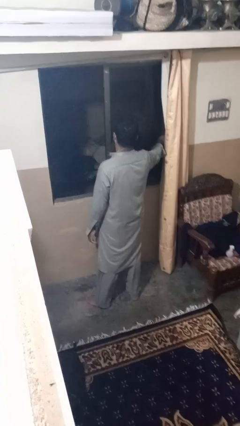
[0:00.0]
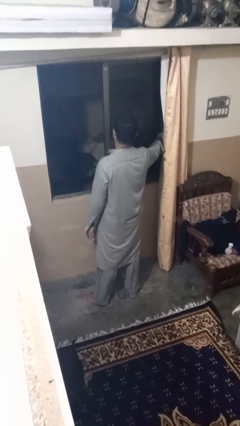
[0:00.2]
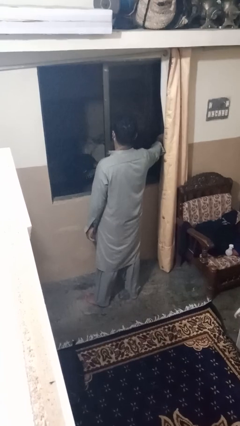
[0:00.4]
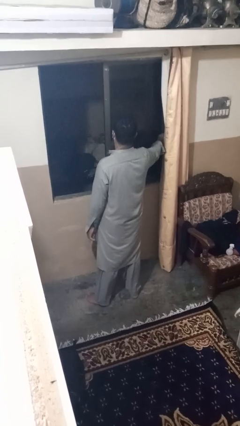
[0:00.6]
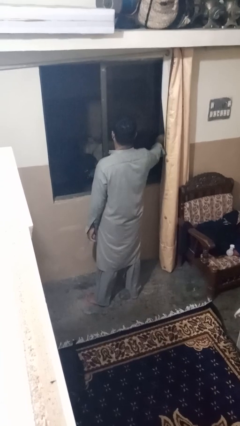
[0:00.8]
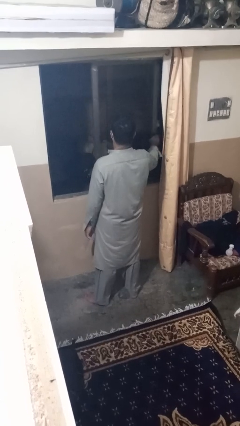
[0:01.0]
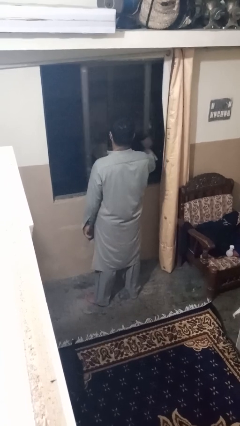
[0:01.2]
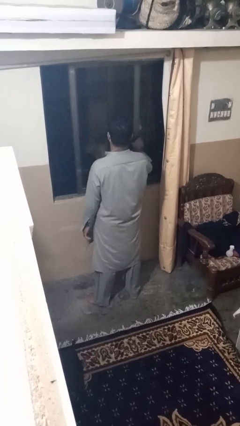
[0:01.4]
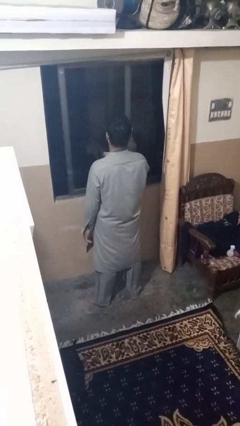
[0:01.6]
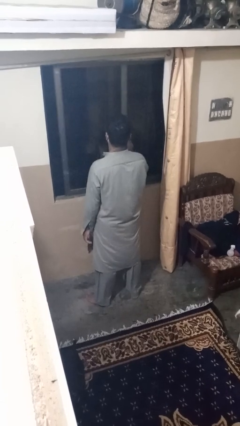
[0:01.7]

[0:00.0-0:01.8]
person closes home window

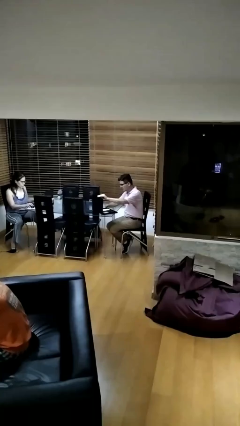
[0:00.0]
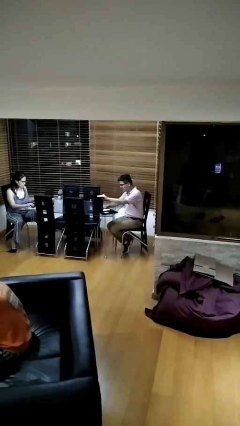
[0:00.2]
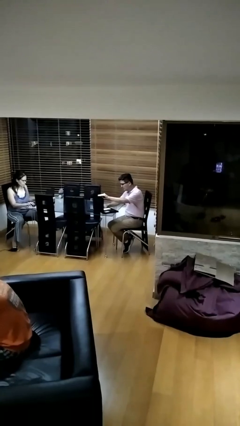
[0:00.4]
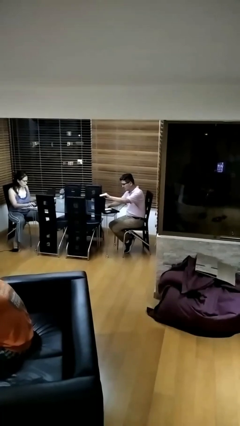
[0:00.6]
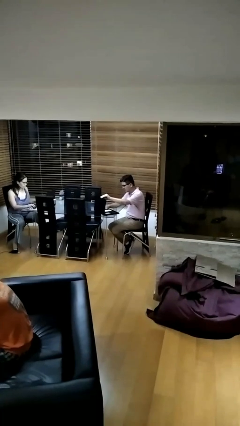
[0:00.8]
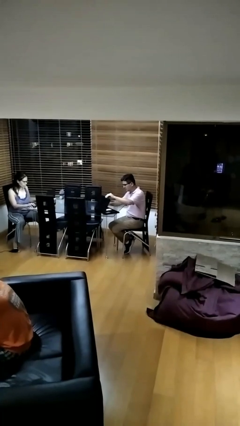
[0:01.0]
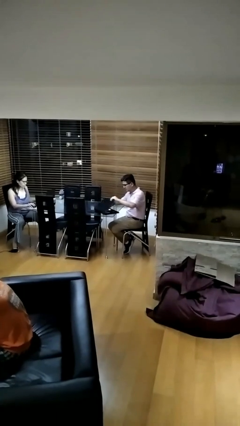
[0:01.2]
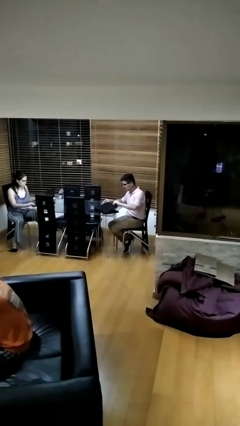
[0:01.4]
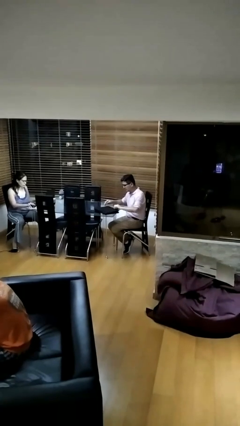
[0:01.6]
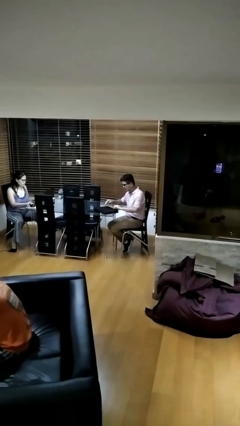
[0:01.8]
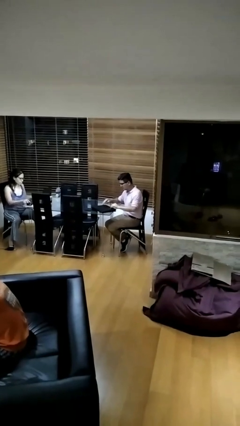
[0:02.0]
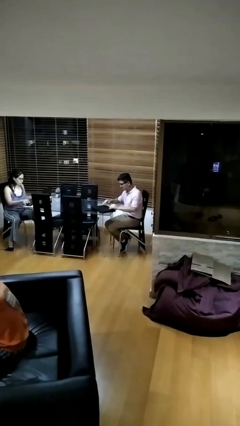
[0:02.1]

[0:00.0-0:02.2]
person interacts with laptop

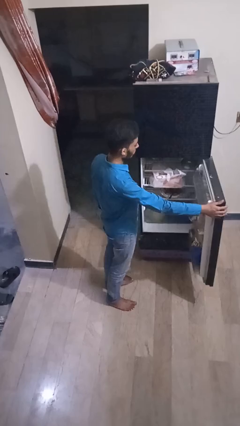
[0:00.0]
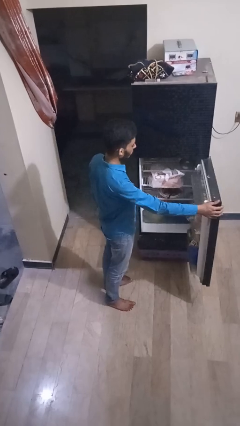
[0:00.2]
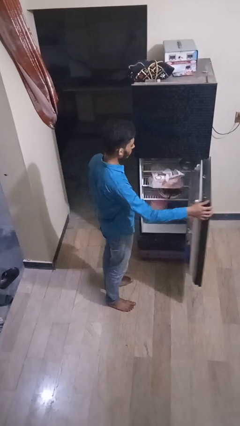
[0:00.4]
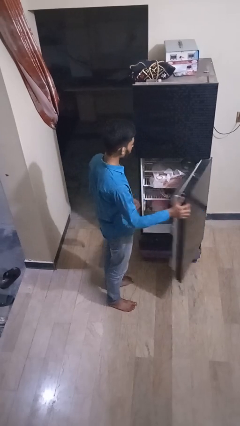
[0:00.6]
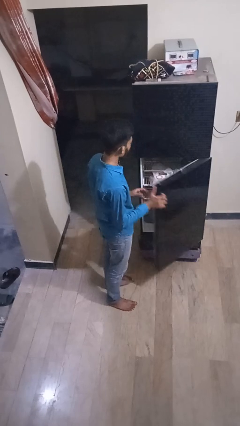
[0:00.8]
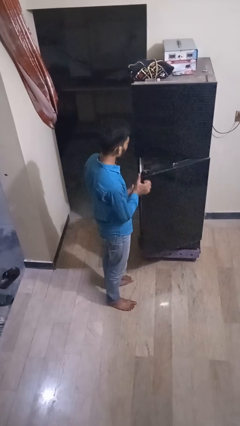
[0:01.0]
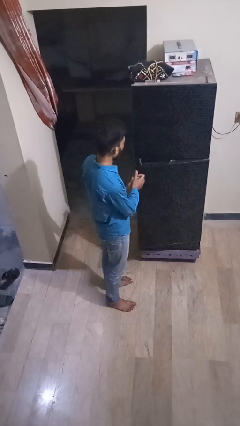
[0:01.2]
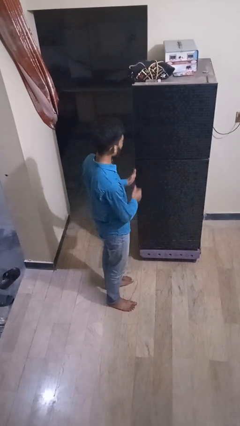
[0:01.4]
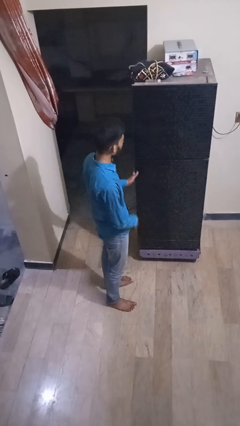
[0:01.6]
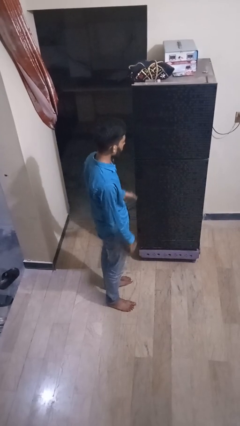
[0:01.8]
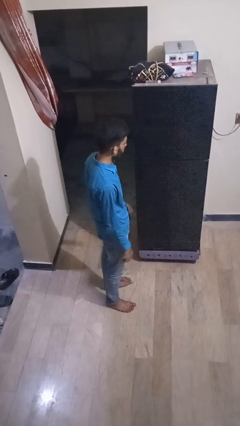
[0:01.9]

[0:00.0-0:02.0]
person closes refrigerator

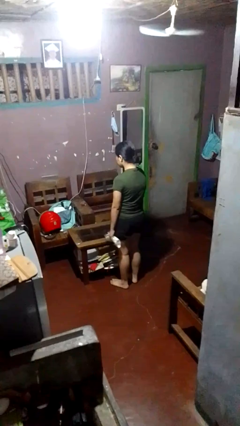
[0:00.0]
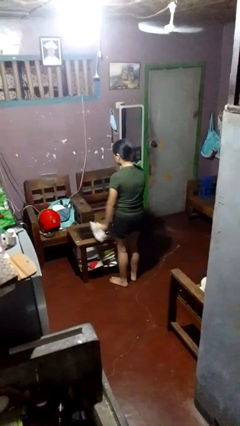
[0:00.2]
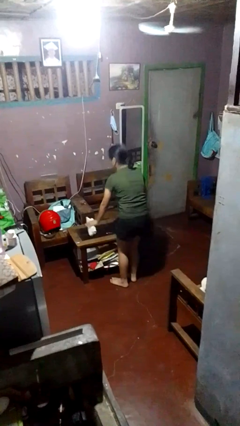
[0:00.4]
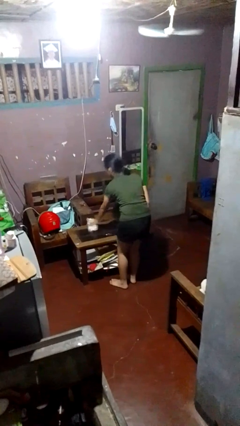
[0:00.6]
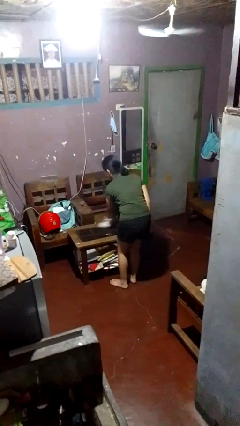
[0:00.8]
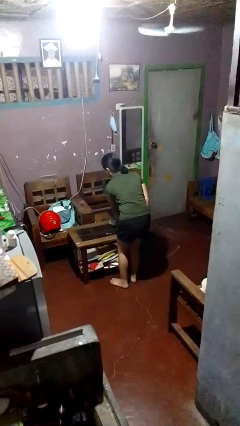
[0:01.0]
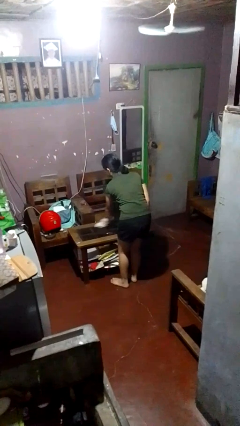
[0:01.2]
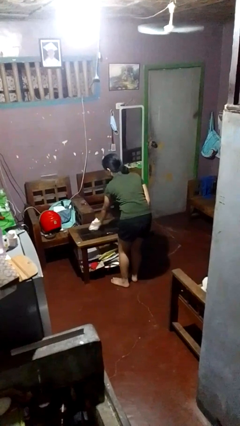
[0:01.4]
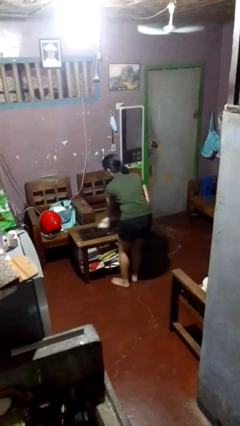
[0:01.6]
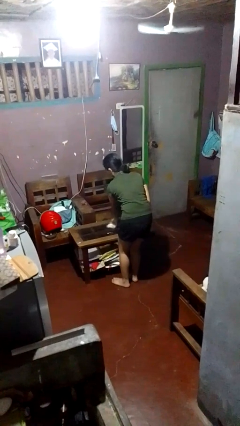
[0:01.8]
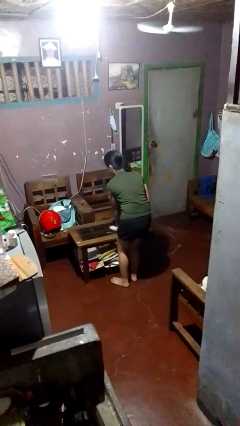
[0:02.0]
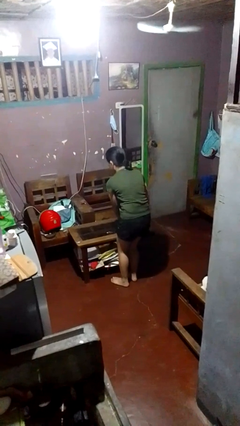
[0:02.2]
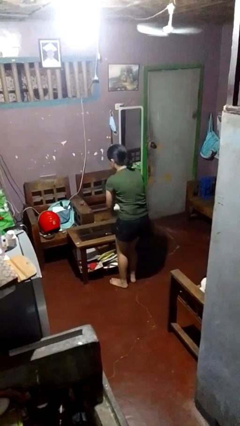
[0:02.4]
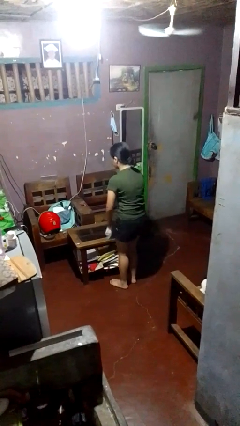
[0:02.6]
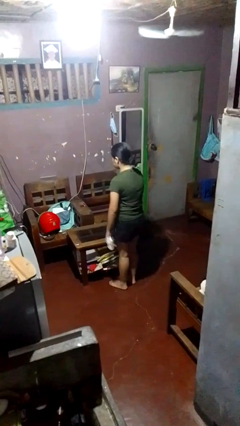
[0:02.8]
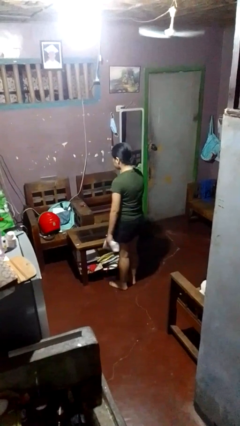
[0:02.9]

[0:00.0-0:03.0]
person cleans table with rag

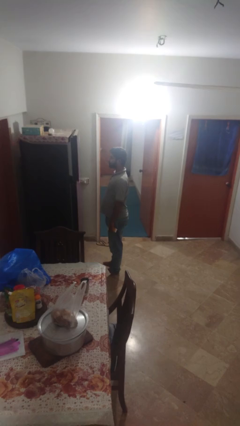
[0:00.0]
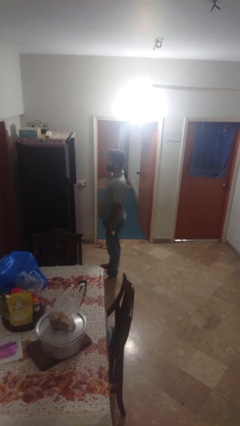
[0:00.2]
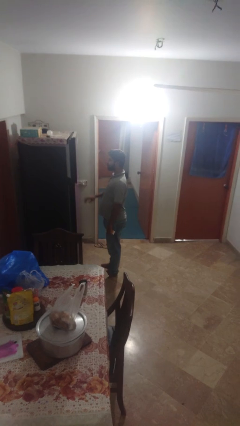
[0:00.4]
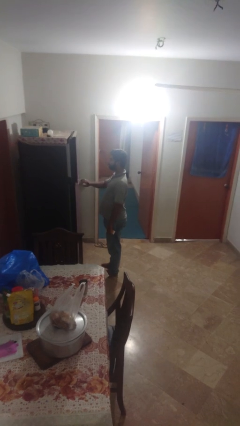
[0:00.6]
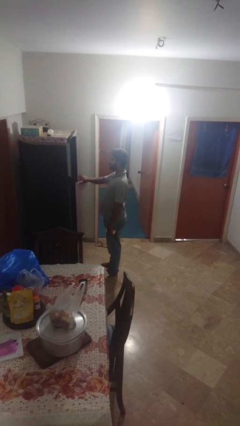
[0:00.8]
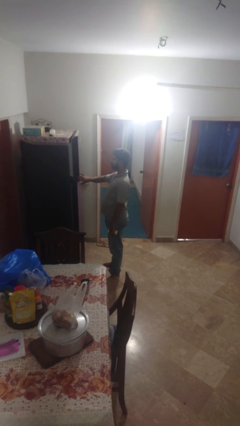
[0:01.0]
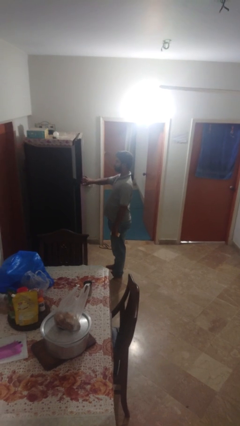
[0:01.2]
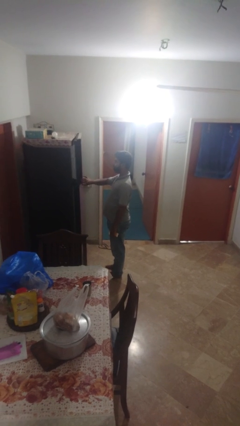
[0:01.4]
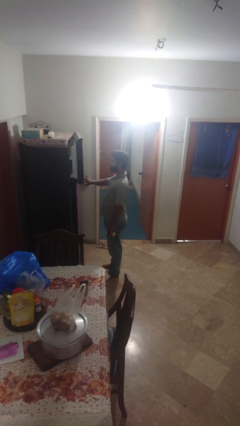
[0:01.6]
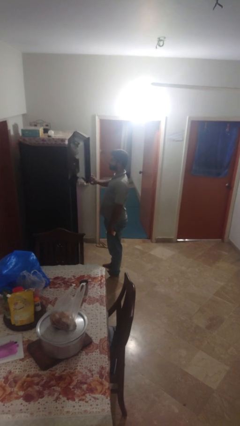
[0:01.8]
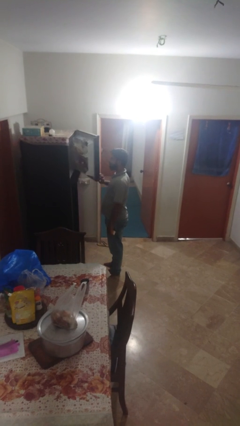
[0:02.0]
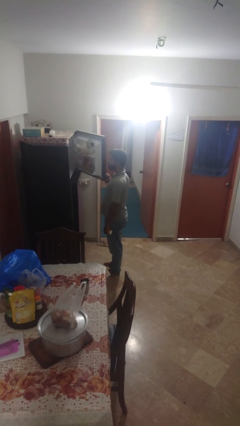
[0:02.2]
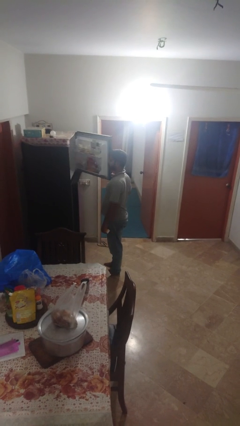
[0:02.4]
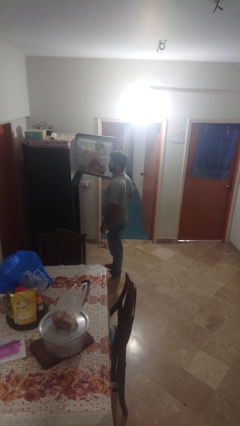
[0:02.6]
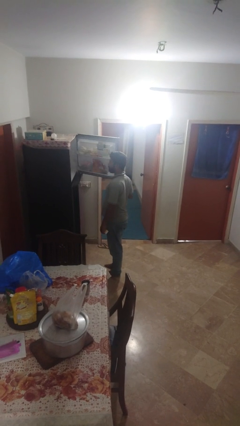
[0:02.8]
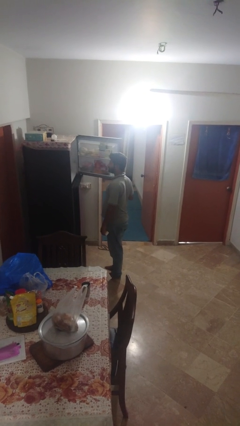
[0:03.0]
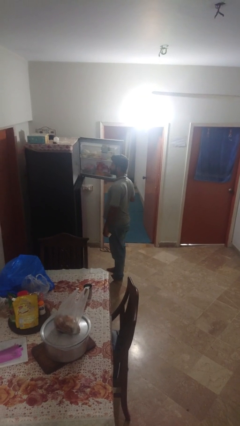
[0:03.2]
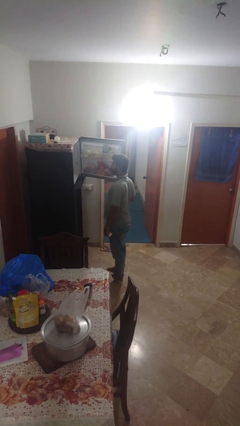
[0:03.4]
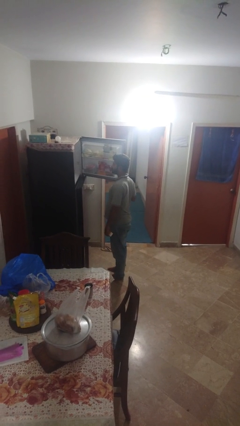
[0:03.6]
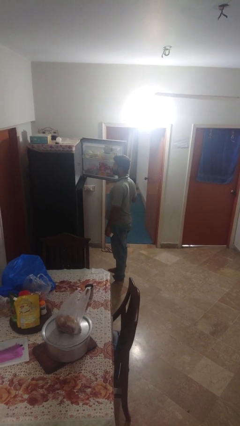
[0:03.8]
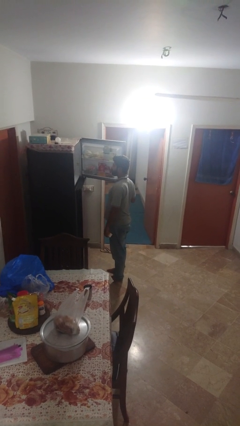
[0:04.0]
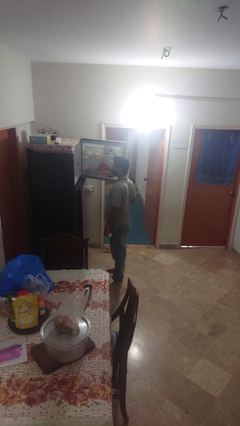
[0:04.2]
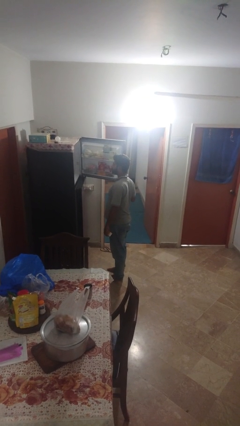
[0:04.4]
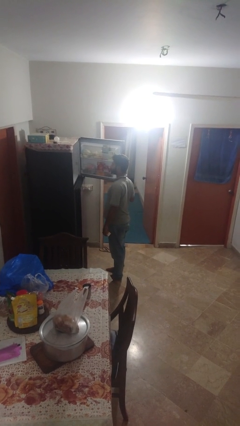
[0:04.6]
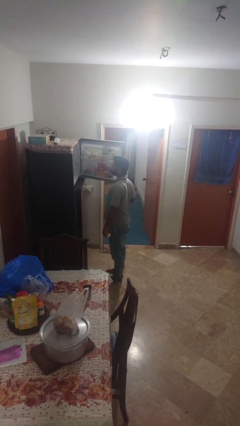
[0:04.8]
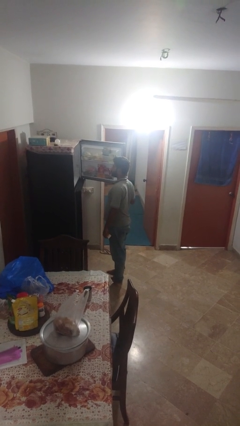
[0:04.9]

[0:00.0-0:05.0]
person opens refrigerator

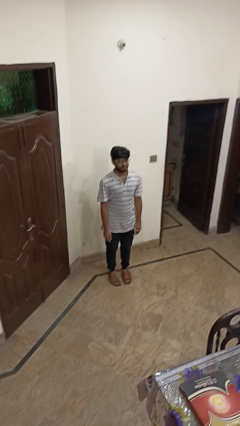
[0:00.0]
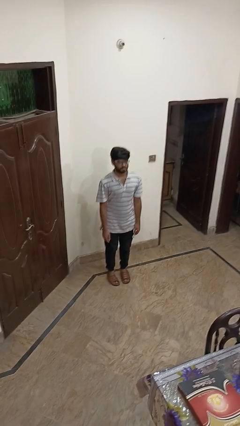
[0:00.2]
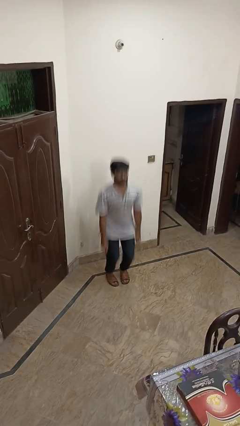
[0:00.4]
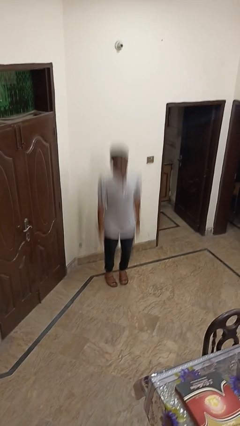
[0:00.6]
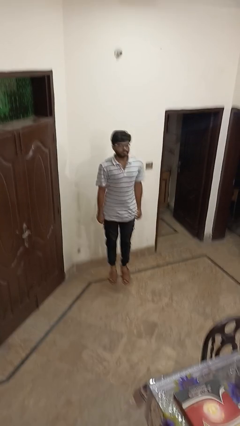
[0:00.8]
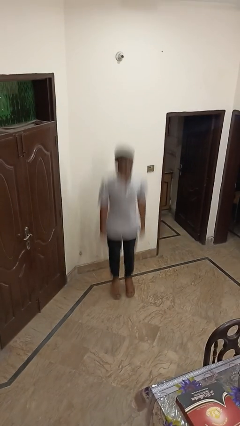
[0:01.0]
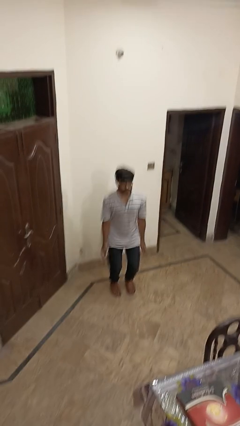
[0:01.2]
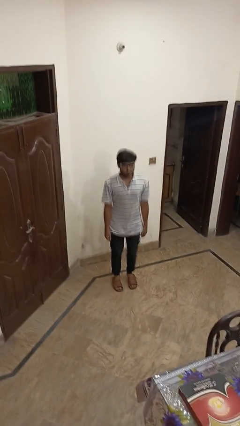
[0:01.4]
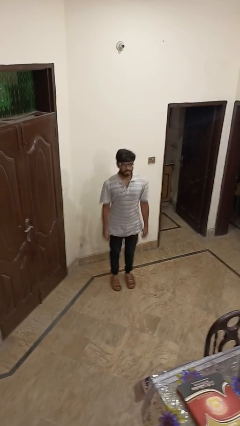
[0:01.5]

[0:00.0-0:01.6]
person jumps

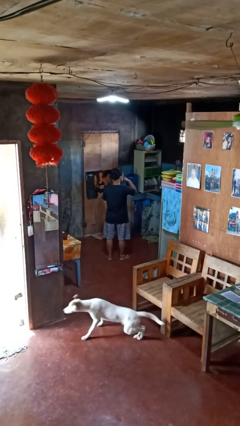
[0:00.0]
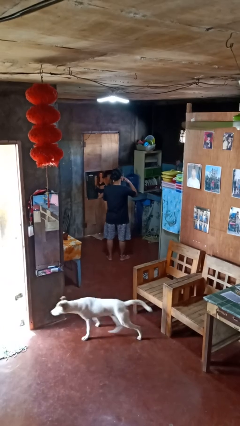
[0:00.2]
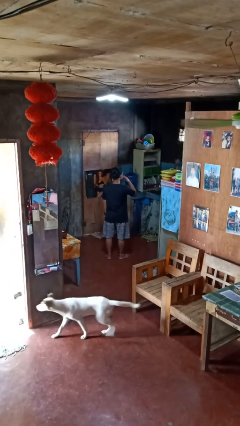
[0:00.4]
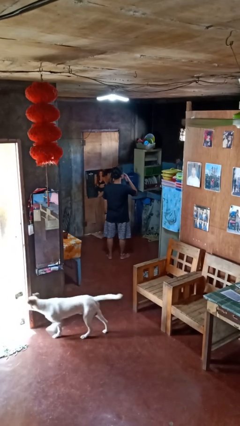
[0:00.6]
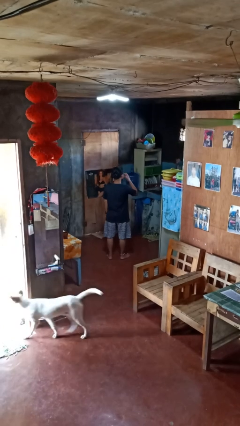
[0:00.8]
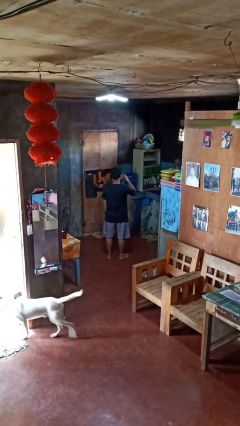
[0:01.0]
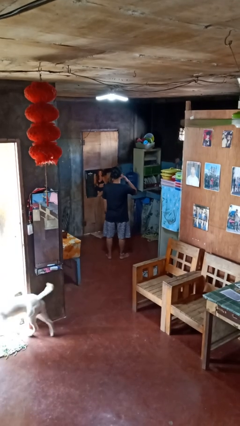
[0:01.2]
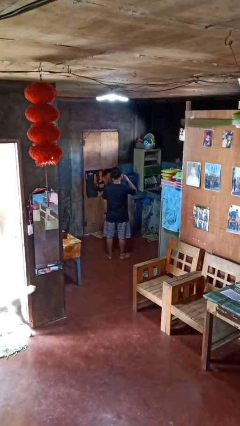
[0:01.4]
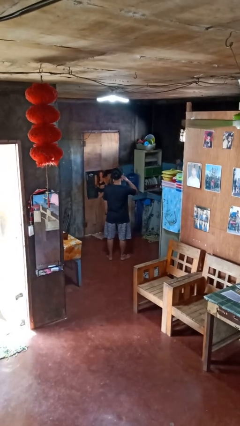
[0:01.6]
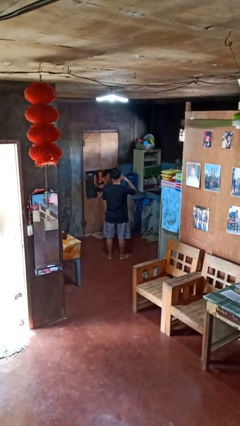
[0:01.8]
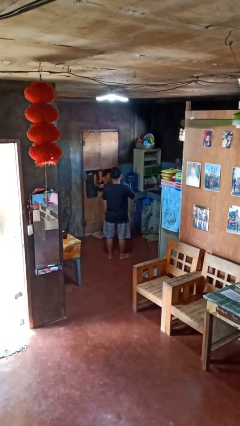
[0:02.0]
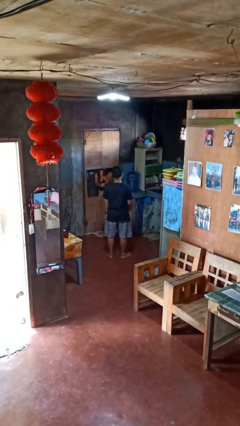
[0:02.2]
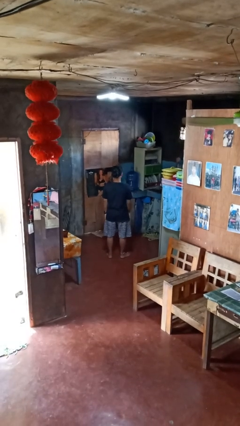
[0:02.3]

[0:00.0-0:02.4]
person licks fingers
